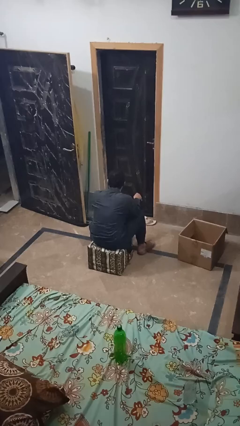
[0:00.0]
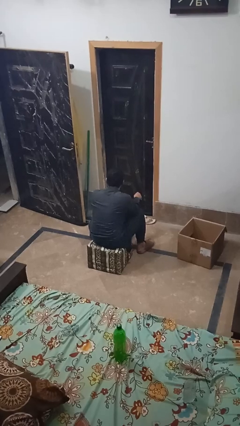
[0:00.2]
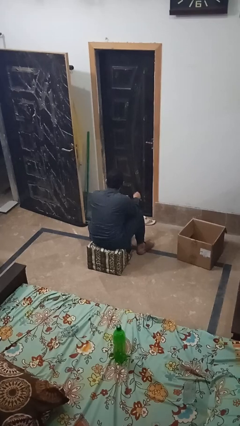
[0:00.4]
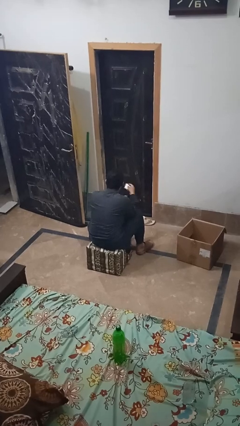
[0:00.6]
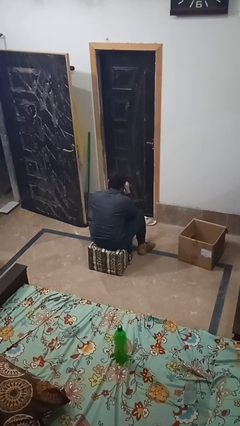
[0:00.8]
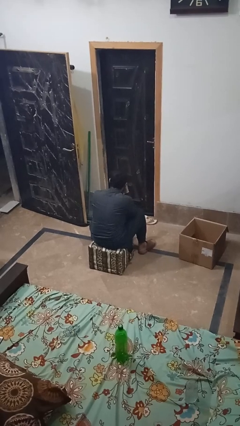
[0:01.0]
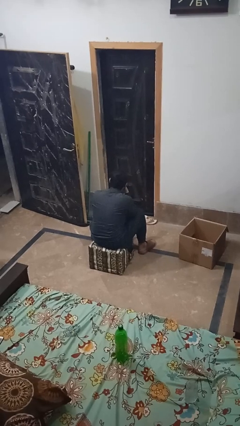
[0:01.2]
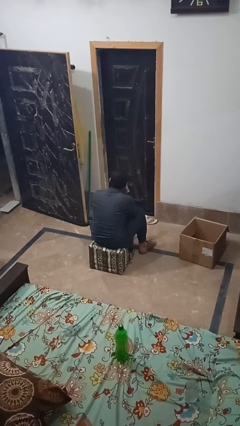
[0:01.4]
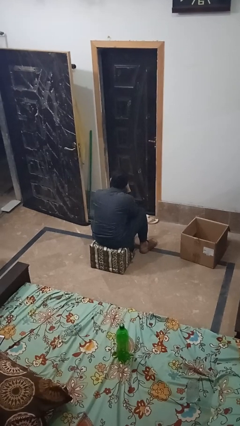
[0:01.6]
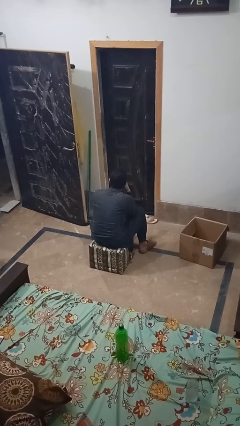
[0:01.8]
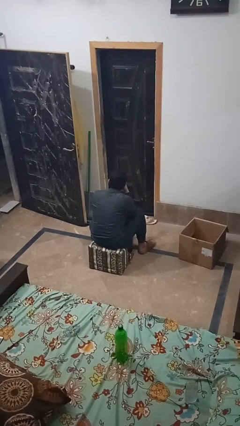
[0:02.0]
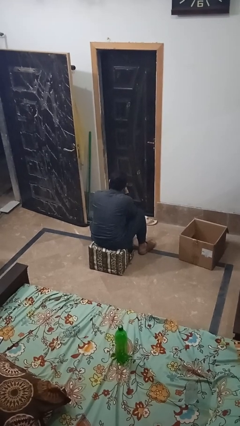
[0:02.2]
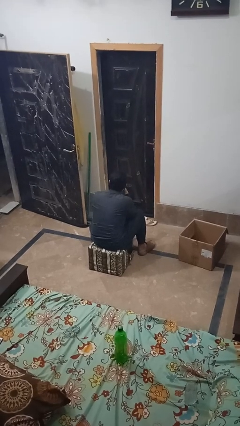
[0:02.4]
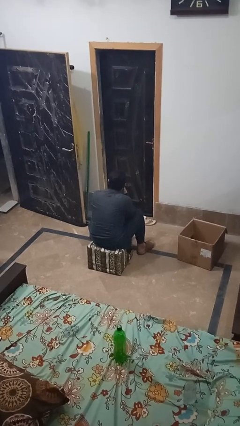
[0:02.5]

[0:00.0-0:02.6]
person blows nose

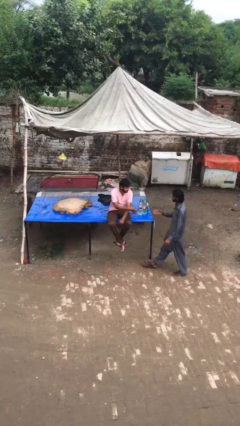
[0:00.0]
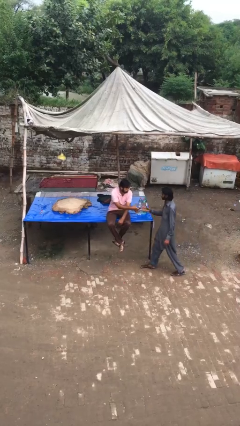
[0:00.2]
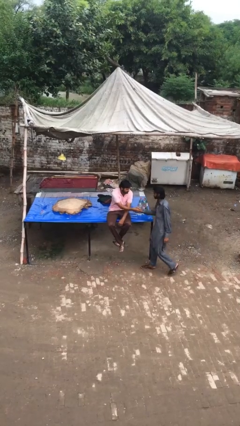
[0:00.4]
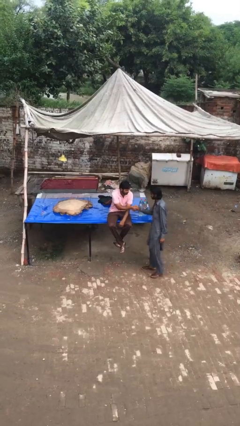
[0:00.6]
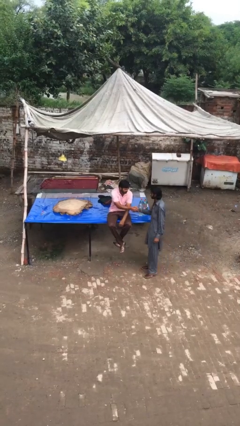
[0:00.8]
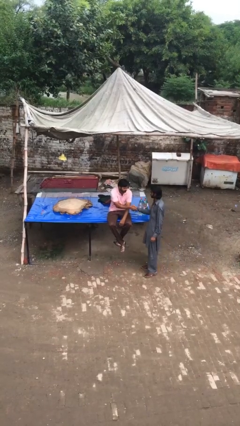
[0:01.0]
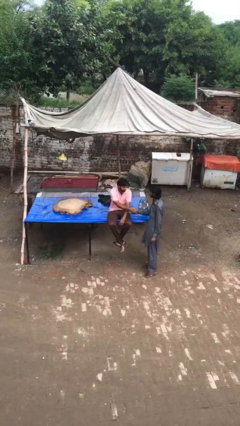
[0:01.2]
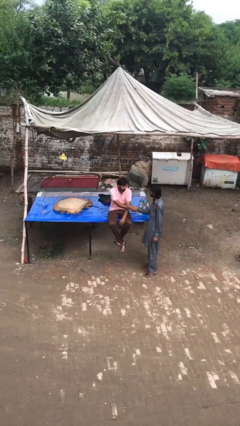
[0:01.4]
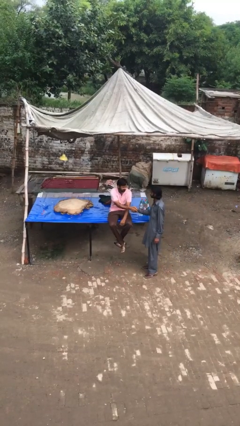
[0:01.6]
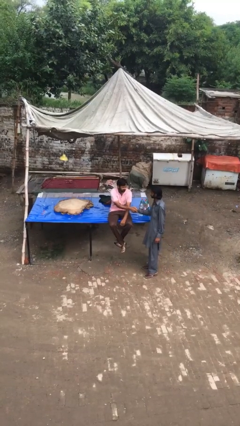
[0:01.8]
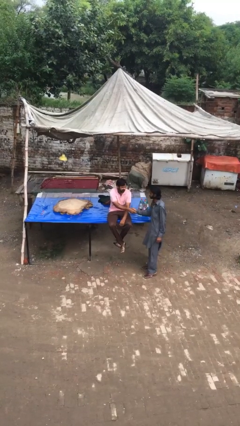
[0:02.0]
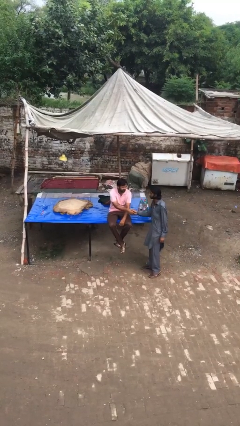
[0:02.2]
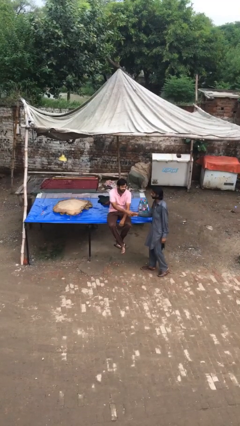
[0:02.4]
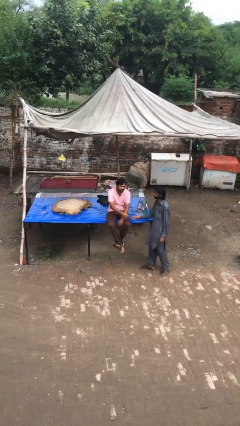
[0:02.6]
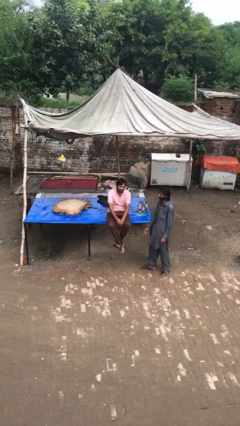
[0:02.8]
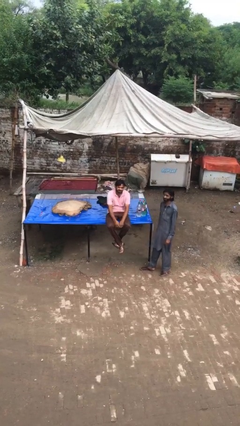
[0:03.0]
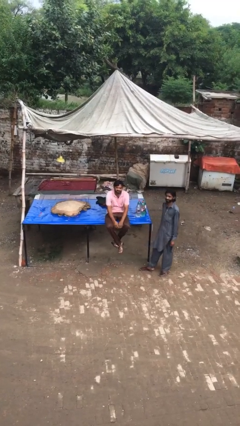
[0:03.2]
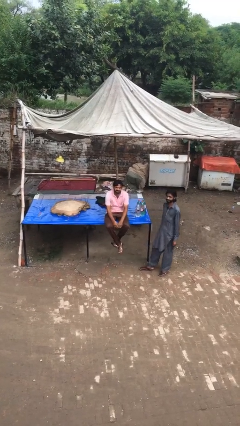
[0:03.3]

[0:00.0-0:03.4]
person shakes hand

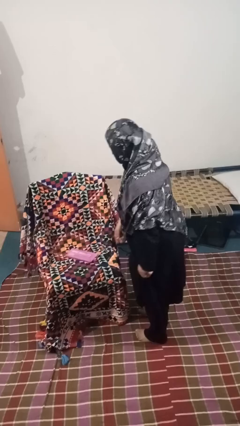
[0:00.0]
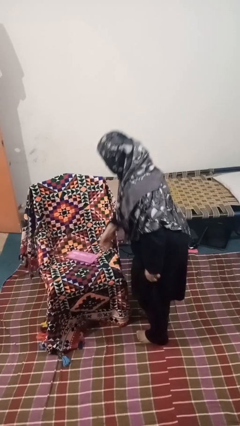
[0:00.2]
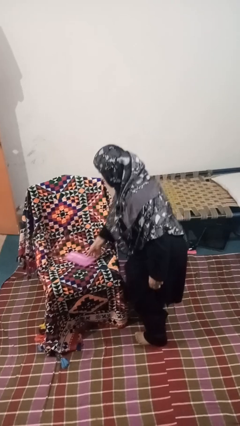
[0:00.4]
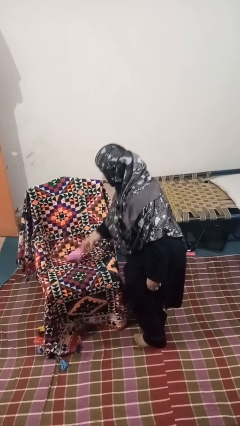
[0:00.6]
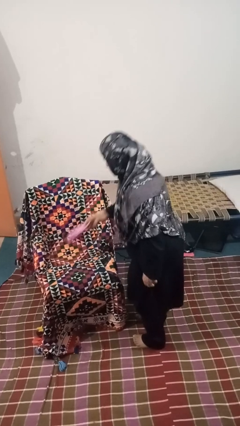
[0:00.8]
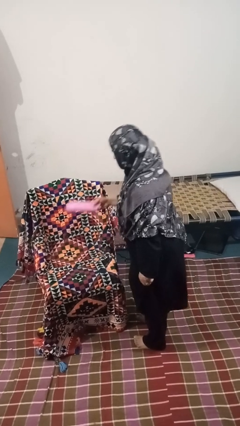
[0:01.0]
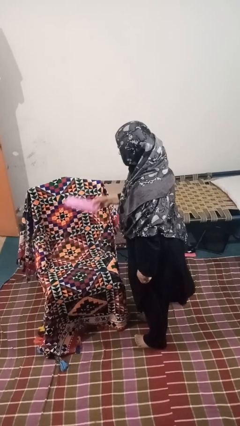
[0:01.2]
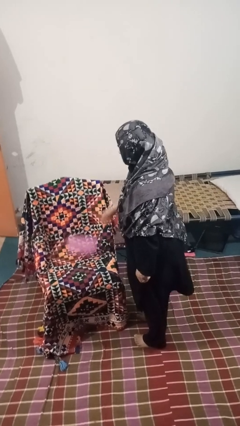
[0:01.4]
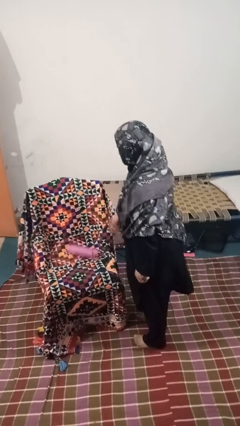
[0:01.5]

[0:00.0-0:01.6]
person picks up object from couch

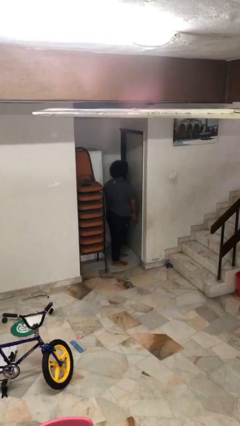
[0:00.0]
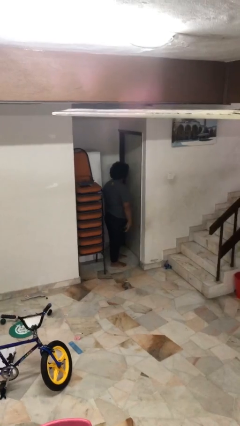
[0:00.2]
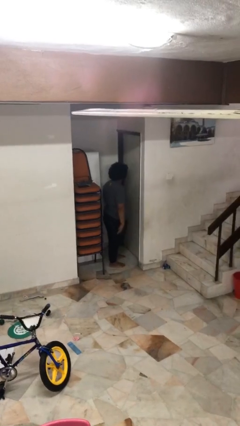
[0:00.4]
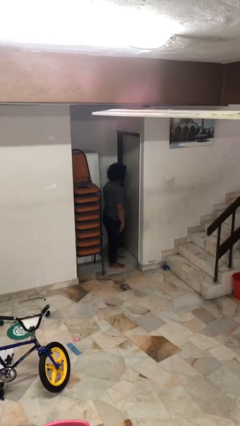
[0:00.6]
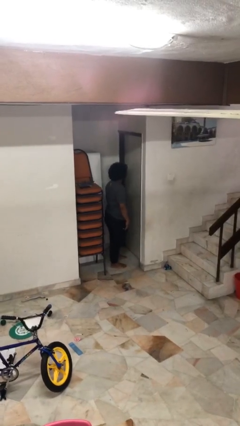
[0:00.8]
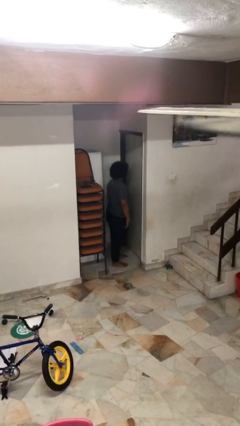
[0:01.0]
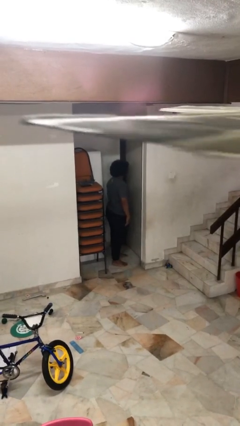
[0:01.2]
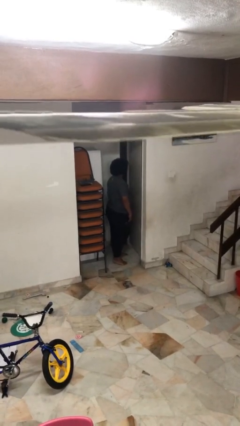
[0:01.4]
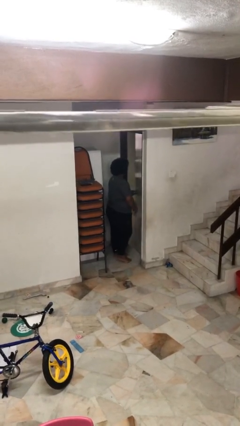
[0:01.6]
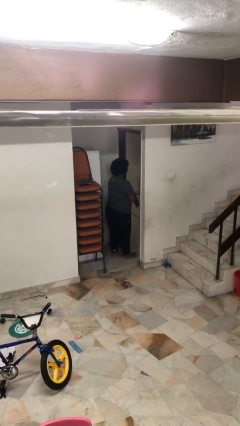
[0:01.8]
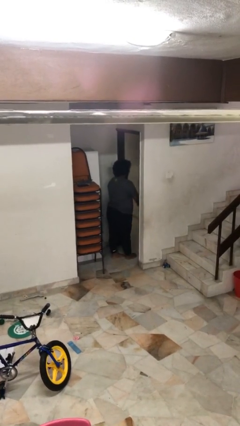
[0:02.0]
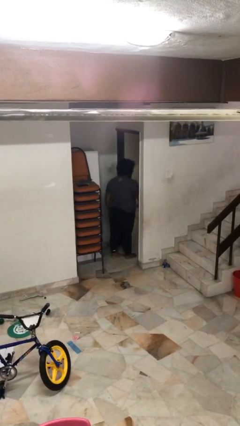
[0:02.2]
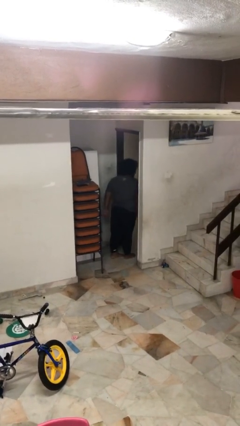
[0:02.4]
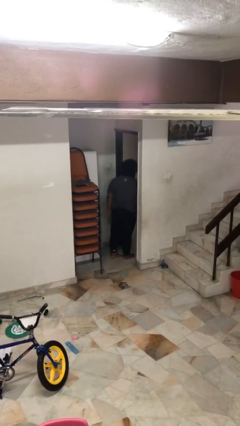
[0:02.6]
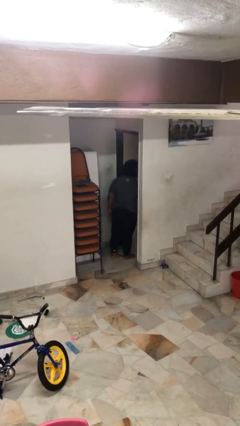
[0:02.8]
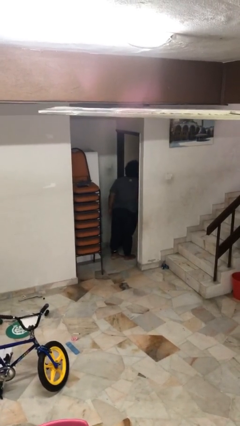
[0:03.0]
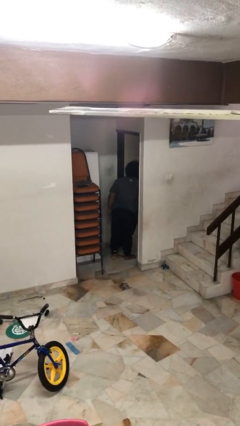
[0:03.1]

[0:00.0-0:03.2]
person opens facility door

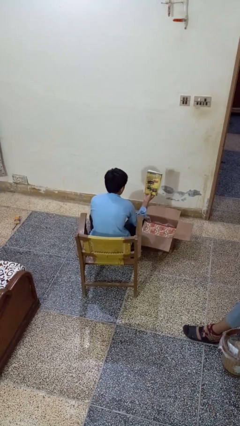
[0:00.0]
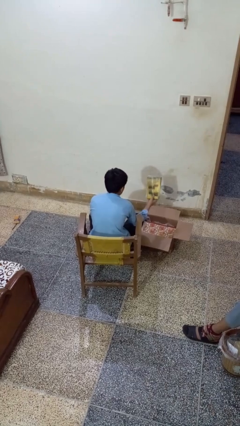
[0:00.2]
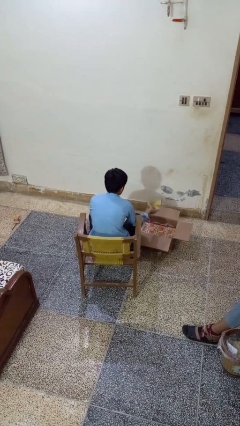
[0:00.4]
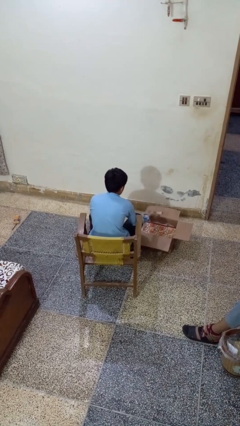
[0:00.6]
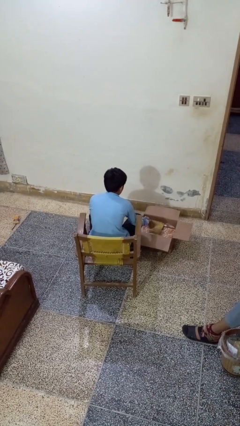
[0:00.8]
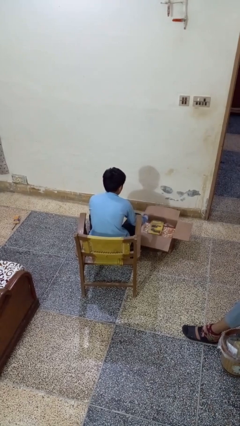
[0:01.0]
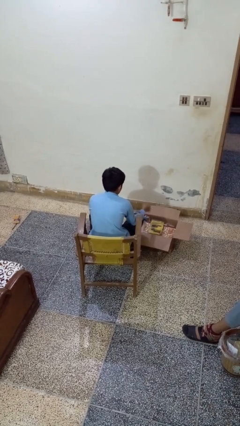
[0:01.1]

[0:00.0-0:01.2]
person puts object into box

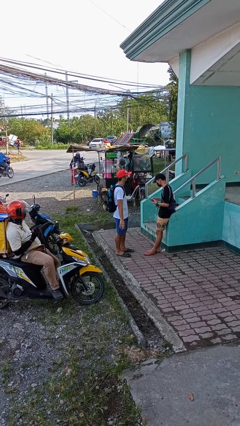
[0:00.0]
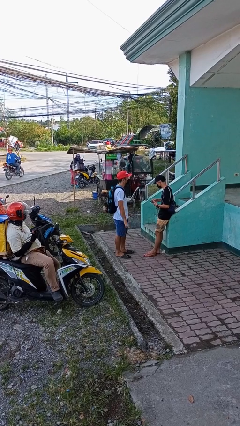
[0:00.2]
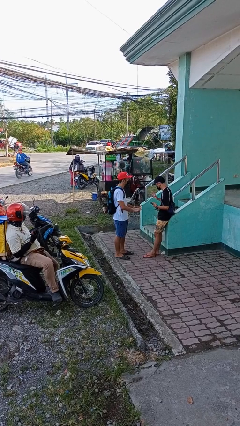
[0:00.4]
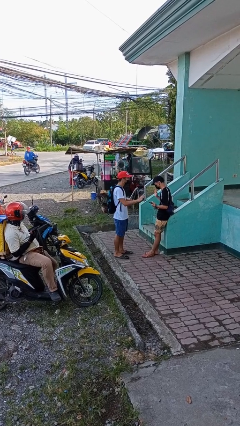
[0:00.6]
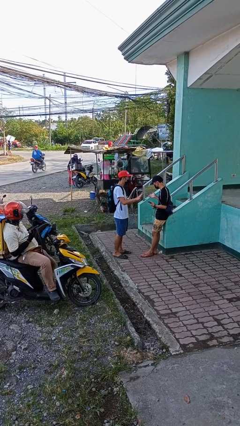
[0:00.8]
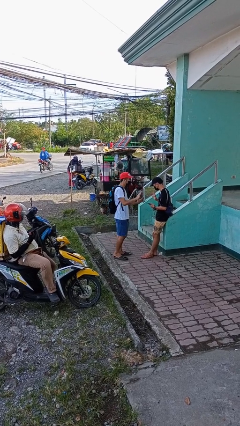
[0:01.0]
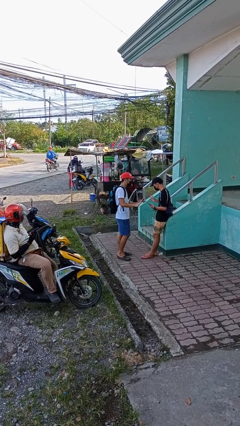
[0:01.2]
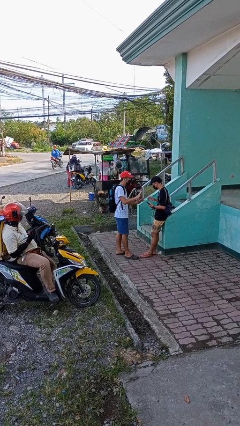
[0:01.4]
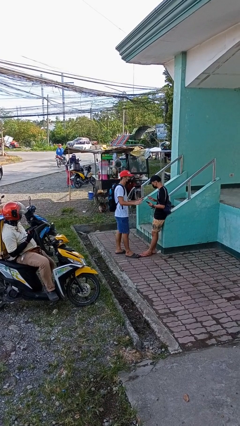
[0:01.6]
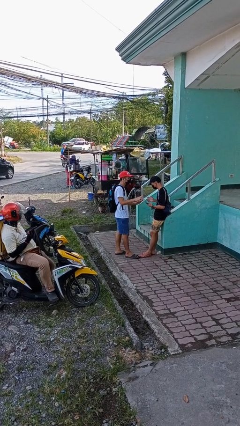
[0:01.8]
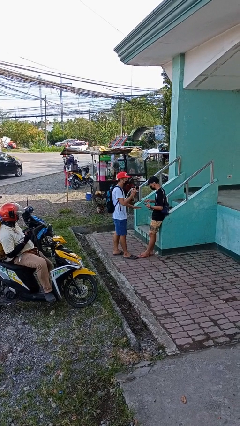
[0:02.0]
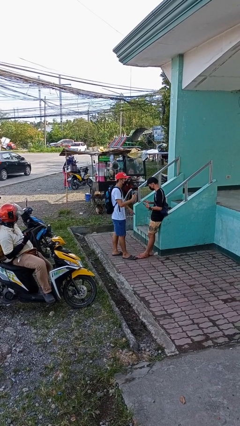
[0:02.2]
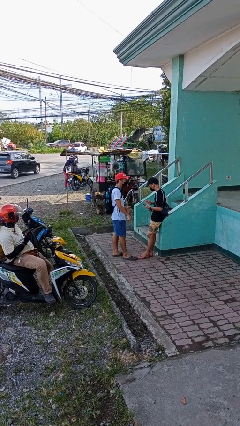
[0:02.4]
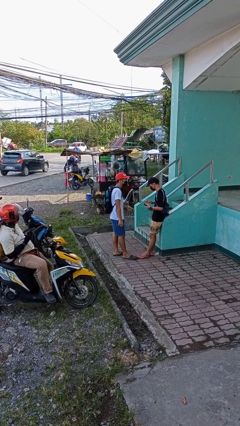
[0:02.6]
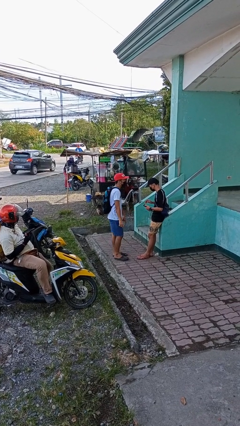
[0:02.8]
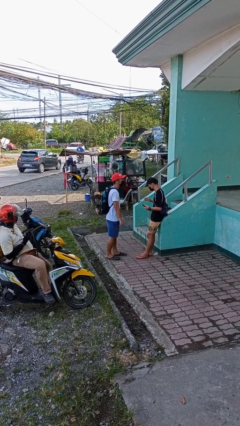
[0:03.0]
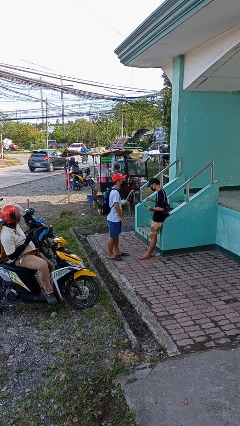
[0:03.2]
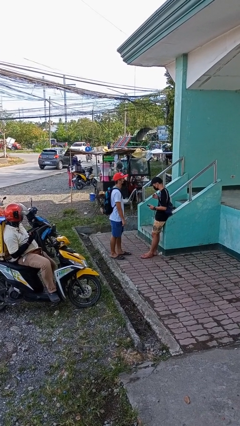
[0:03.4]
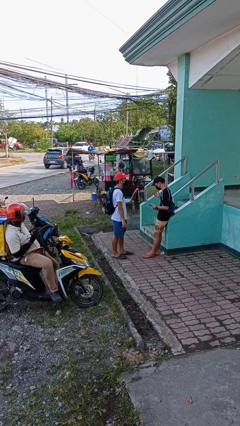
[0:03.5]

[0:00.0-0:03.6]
person talks to person

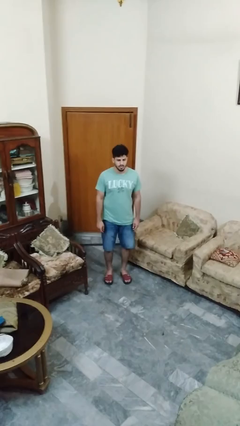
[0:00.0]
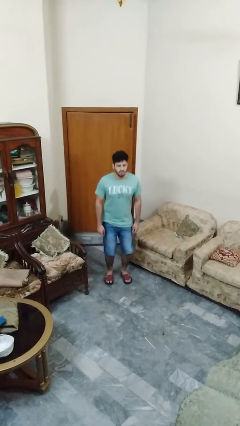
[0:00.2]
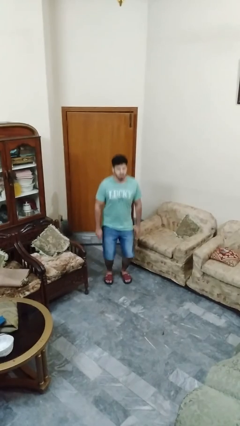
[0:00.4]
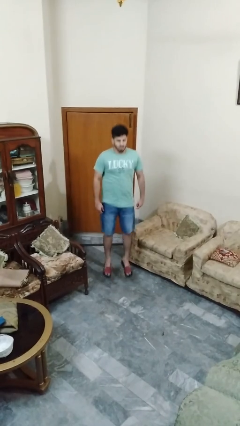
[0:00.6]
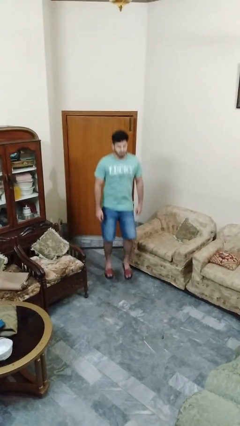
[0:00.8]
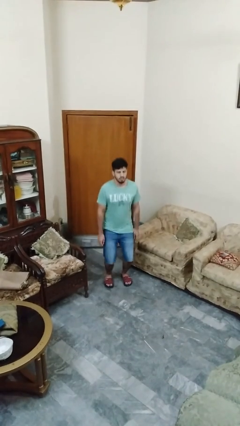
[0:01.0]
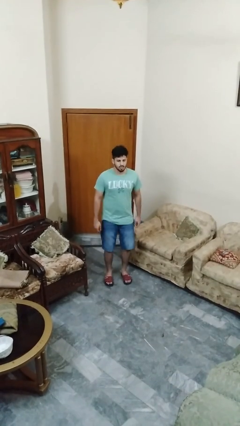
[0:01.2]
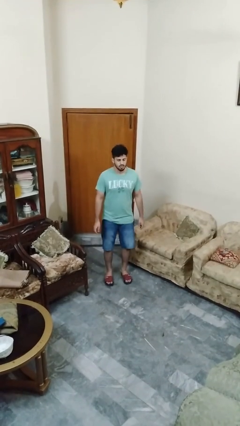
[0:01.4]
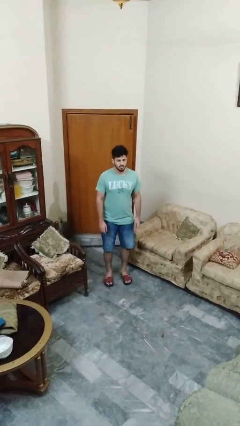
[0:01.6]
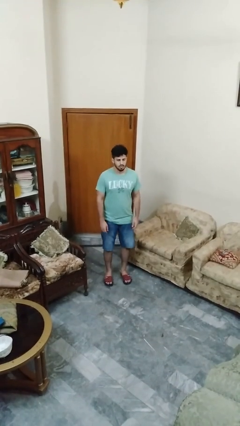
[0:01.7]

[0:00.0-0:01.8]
person jumps
